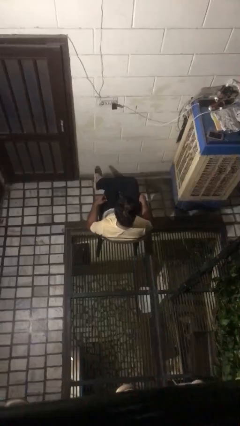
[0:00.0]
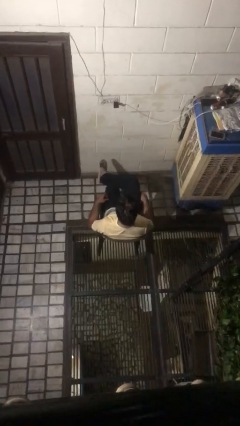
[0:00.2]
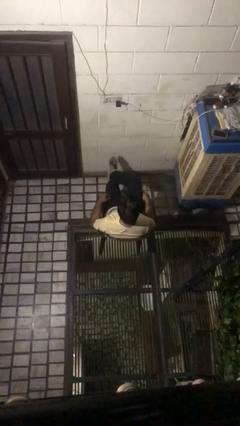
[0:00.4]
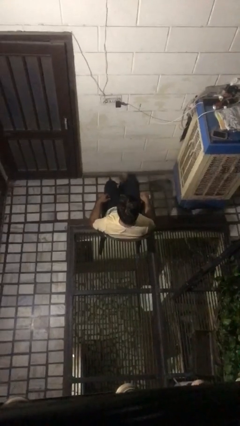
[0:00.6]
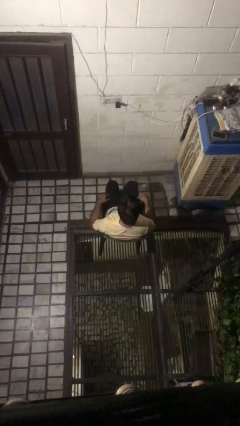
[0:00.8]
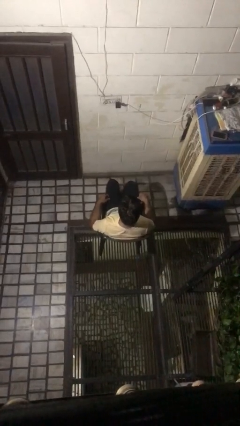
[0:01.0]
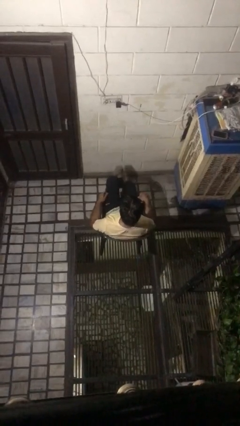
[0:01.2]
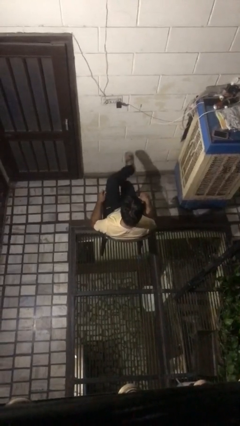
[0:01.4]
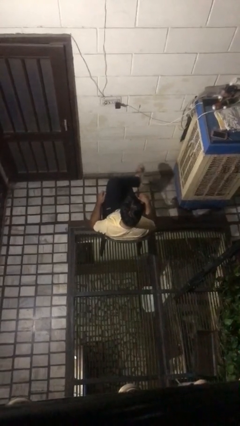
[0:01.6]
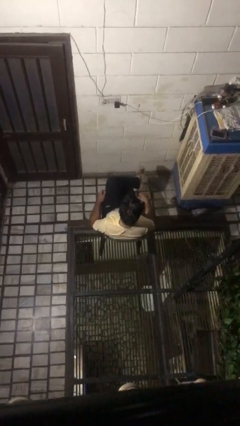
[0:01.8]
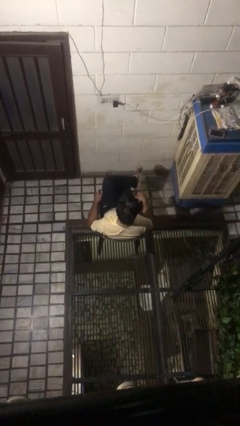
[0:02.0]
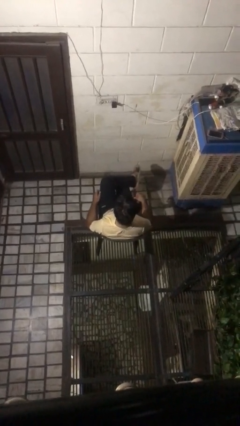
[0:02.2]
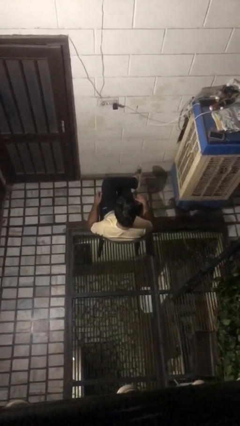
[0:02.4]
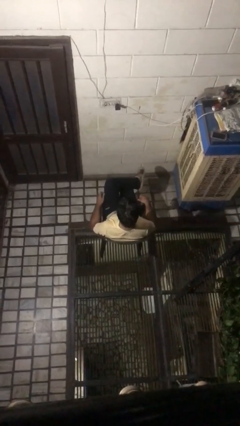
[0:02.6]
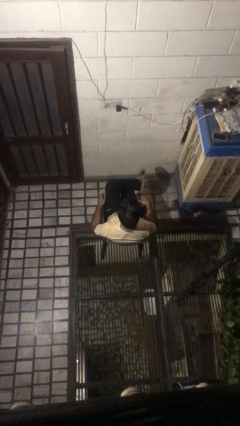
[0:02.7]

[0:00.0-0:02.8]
person crosses legs

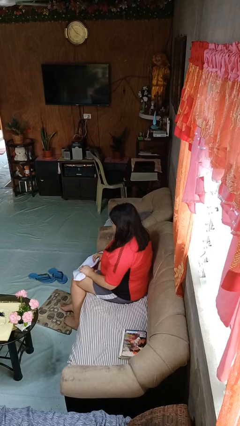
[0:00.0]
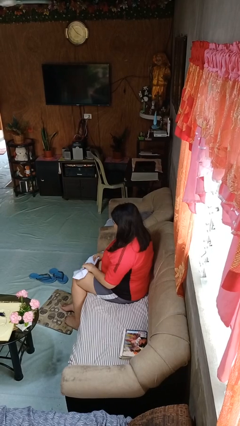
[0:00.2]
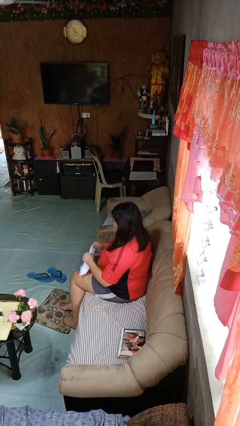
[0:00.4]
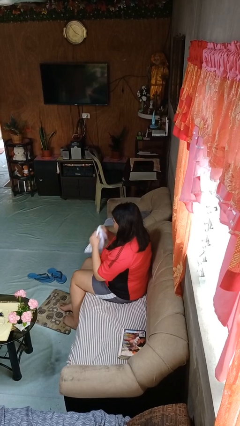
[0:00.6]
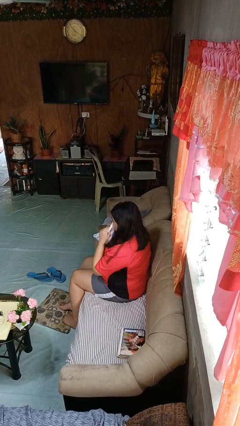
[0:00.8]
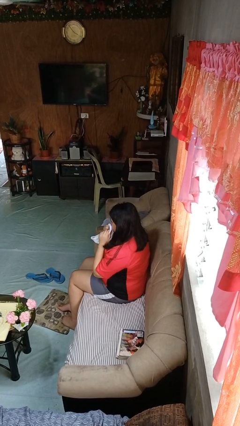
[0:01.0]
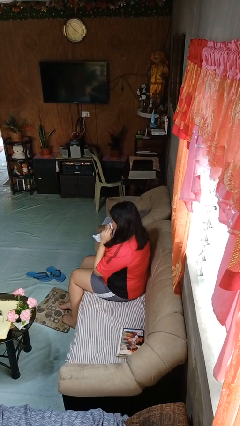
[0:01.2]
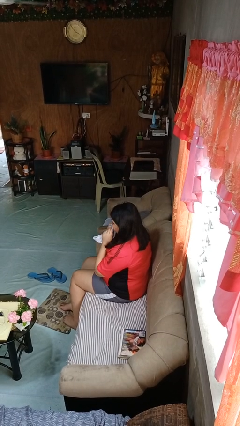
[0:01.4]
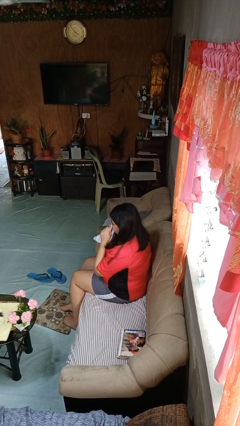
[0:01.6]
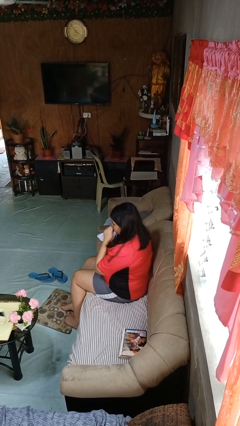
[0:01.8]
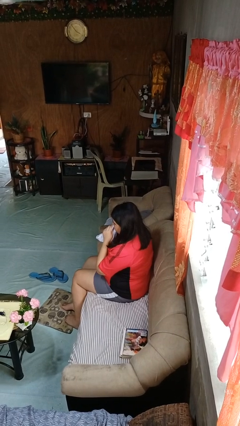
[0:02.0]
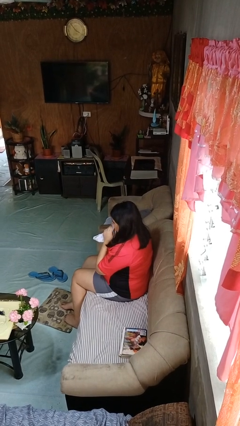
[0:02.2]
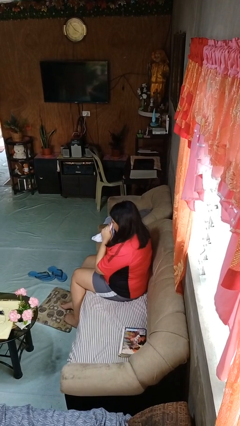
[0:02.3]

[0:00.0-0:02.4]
person wipes mouth with napkin

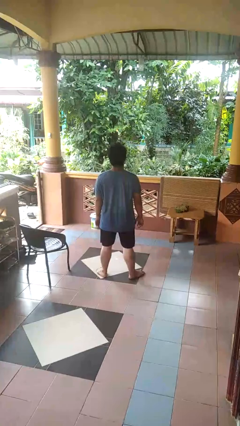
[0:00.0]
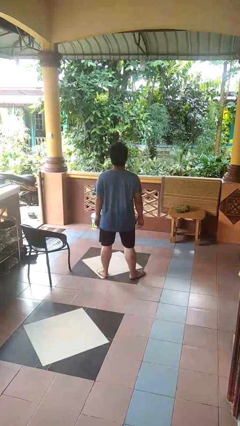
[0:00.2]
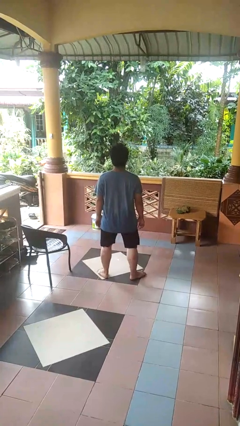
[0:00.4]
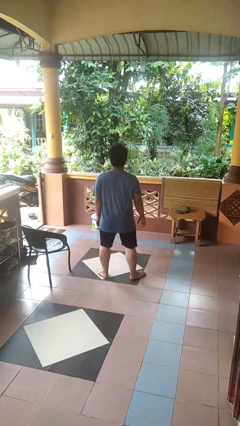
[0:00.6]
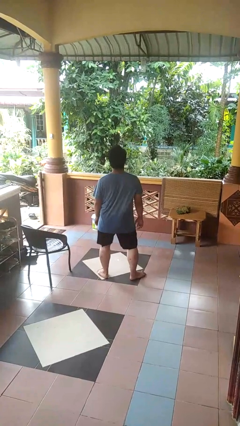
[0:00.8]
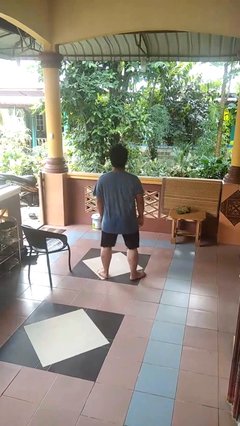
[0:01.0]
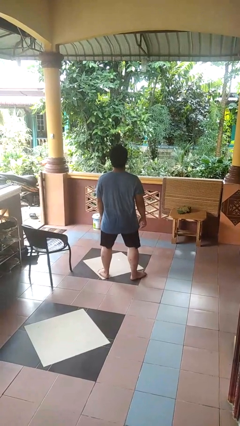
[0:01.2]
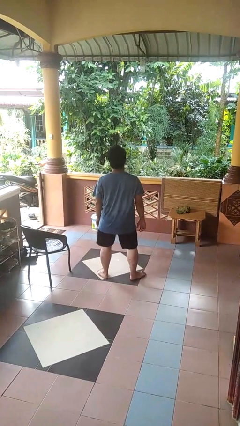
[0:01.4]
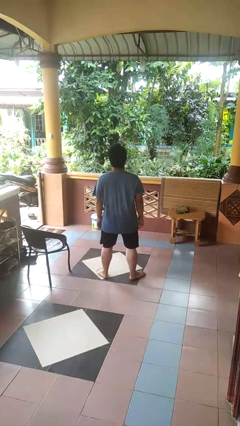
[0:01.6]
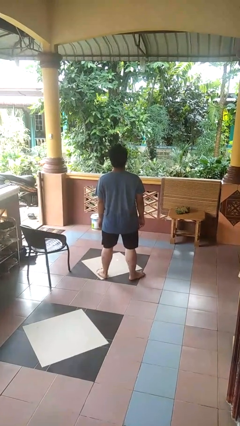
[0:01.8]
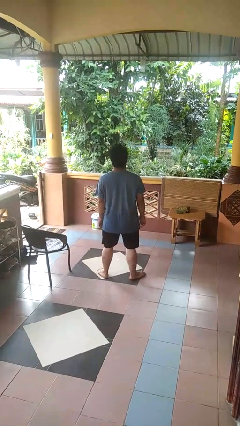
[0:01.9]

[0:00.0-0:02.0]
person wiggles hips

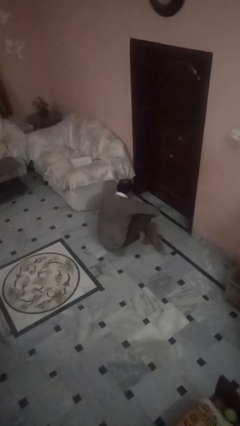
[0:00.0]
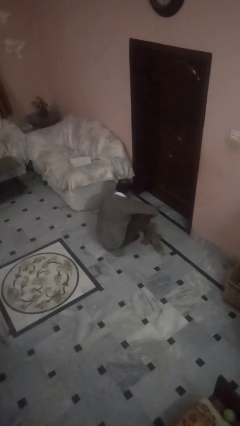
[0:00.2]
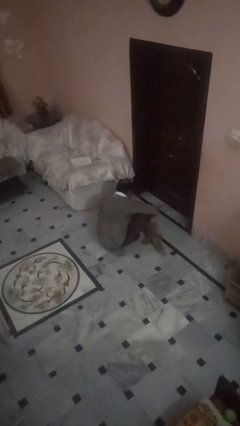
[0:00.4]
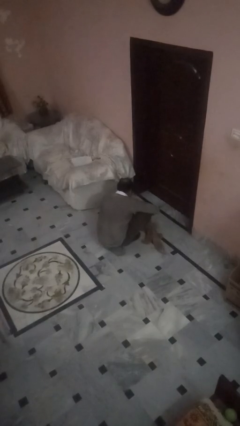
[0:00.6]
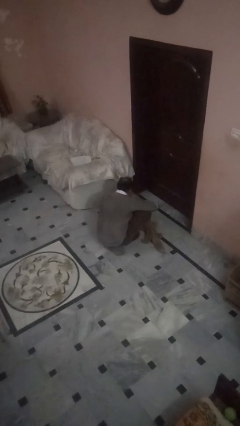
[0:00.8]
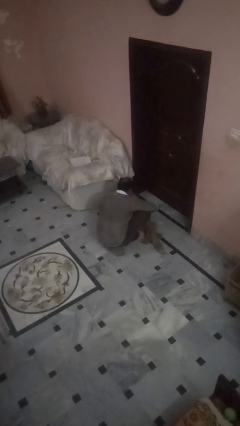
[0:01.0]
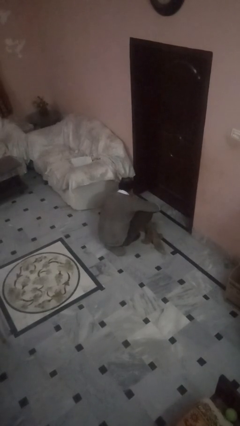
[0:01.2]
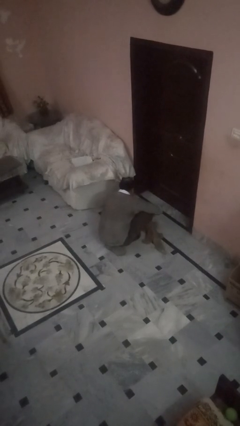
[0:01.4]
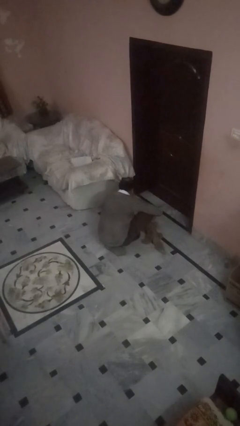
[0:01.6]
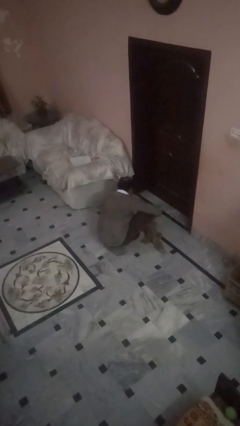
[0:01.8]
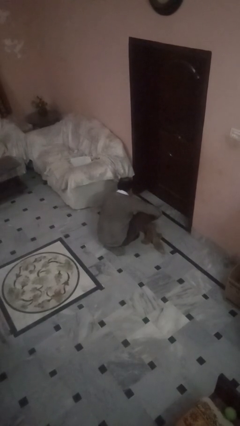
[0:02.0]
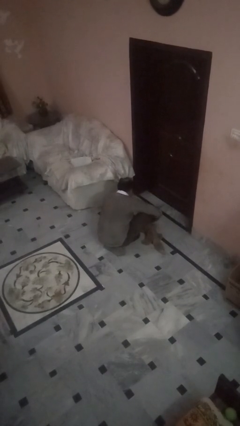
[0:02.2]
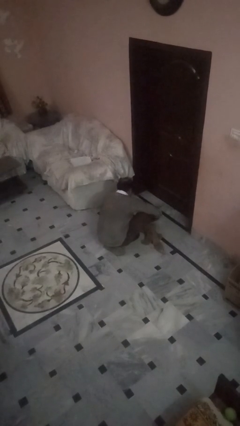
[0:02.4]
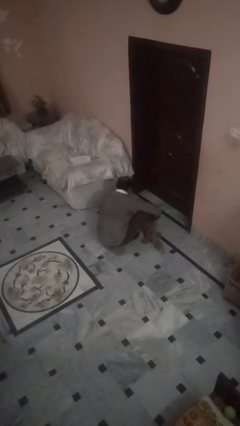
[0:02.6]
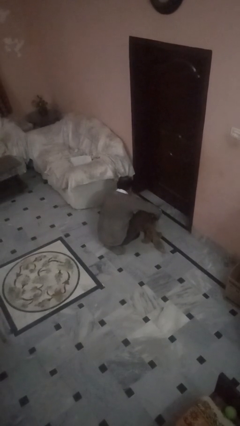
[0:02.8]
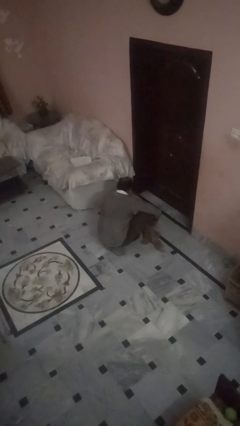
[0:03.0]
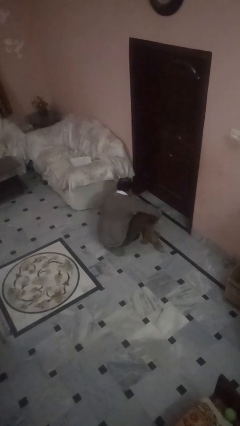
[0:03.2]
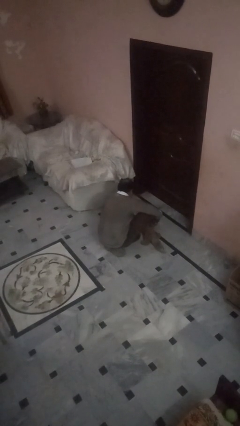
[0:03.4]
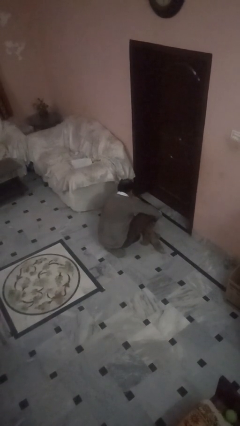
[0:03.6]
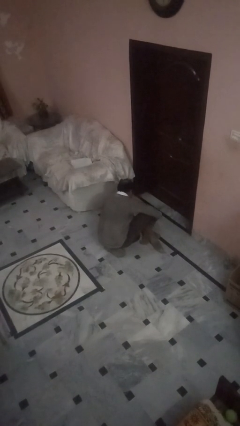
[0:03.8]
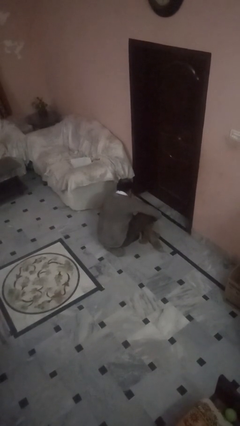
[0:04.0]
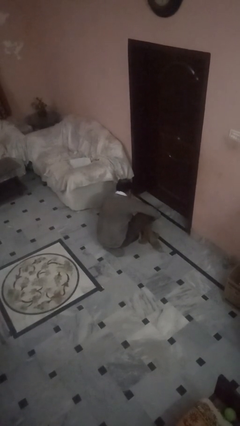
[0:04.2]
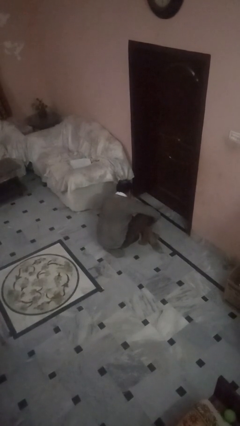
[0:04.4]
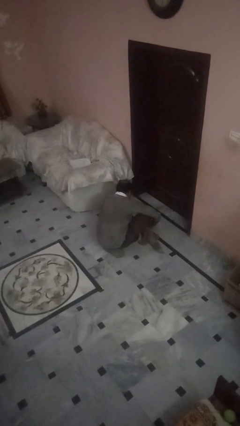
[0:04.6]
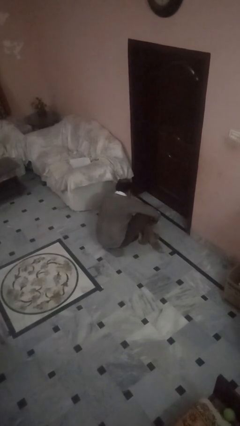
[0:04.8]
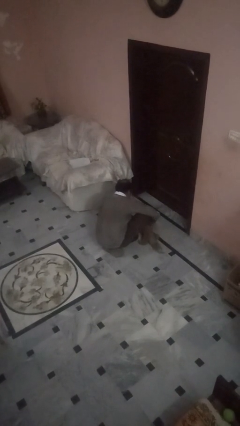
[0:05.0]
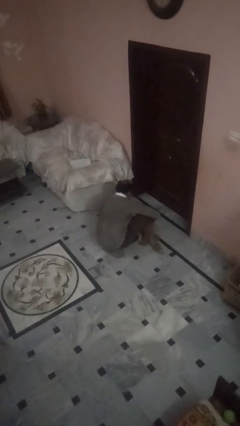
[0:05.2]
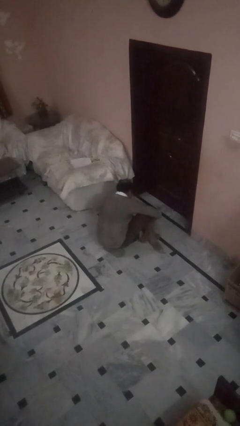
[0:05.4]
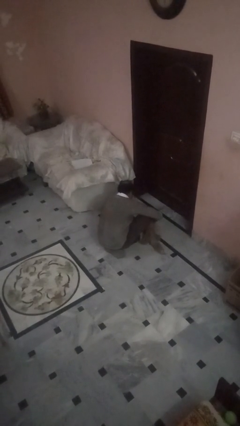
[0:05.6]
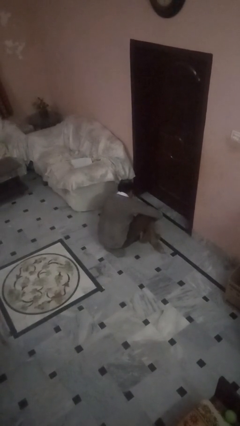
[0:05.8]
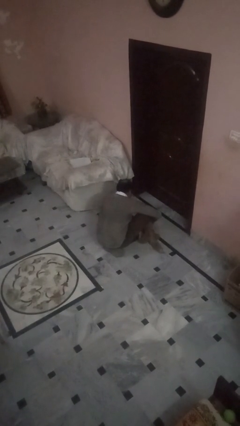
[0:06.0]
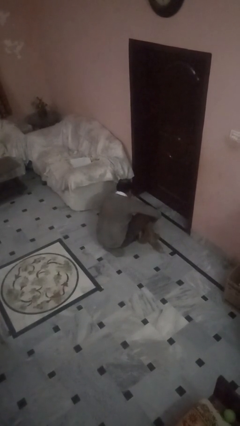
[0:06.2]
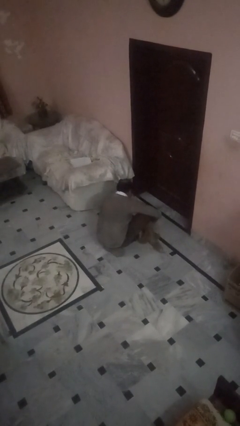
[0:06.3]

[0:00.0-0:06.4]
person attaches leash to dog

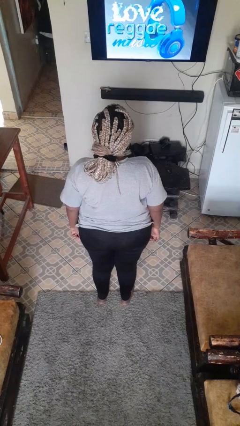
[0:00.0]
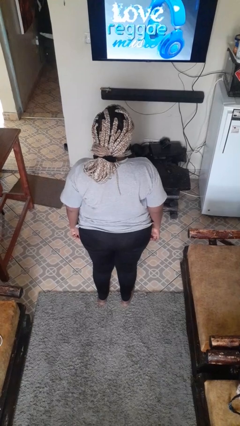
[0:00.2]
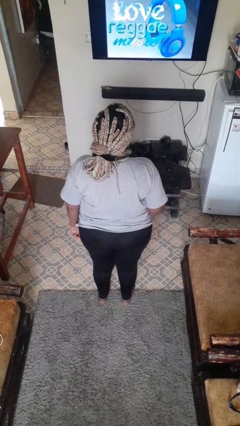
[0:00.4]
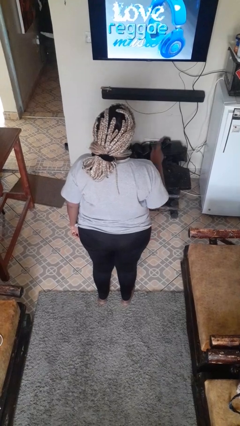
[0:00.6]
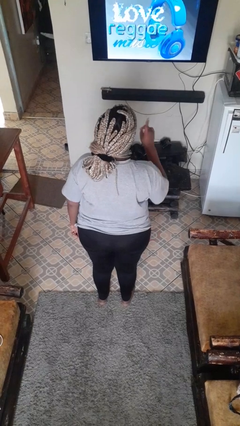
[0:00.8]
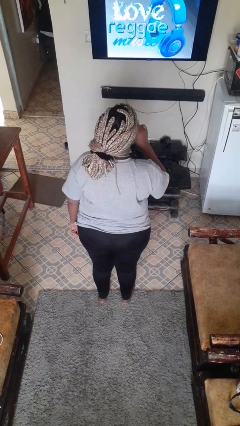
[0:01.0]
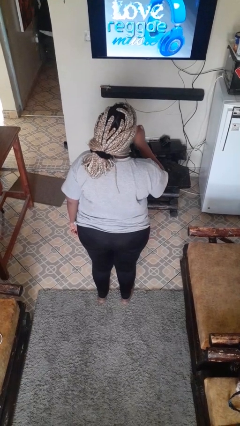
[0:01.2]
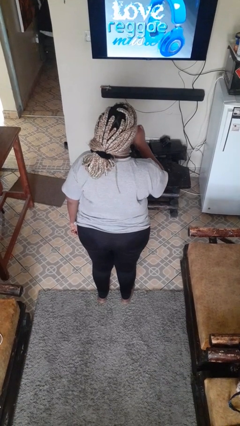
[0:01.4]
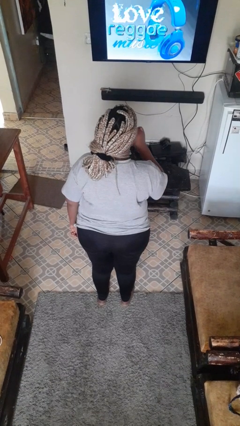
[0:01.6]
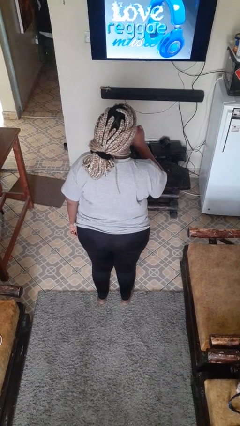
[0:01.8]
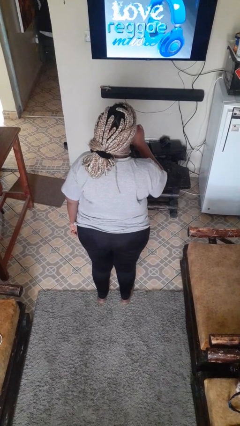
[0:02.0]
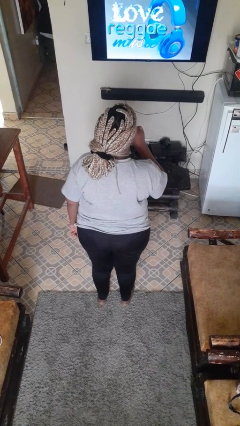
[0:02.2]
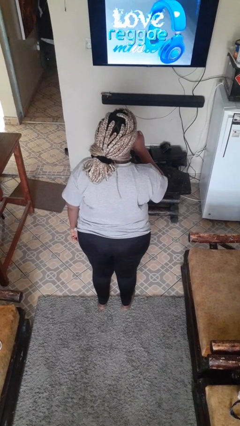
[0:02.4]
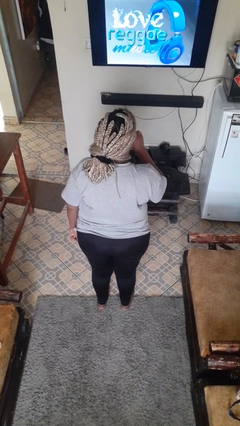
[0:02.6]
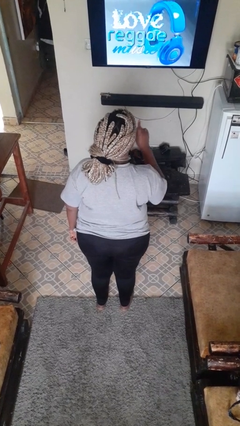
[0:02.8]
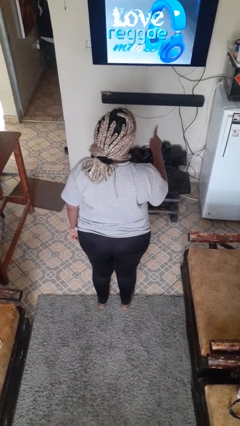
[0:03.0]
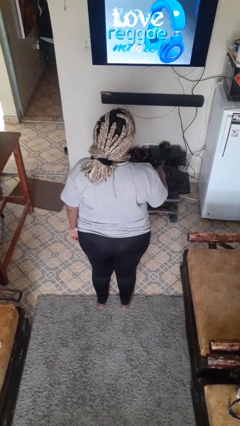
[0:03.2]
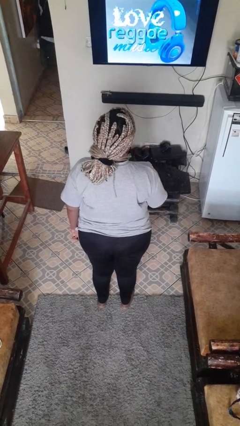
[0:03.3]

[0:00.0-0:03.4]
person gestures be quiet

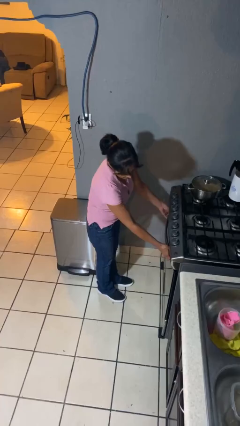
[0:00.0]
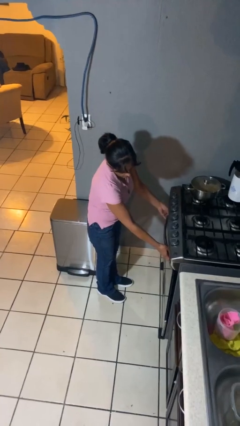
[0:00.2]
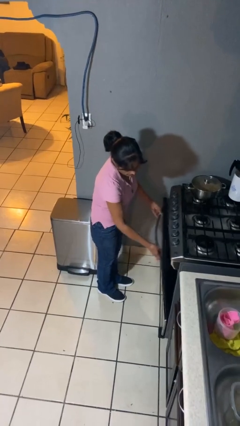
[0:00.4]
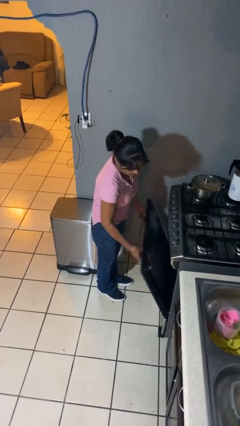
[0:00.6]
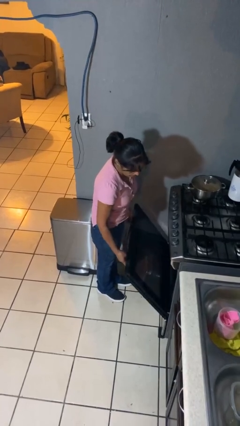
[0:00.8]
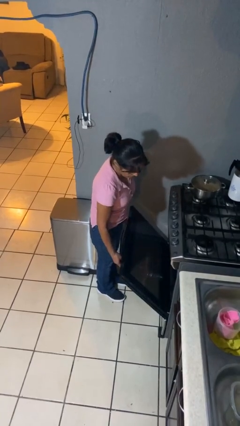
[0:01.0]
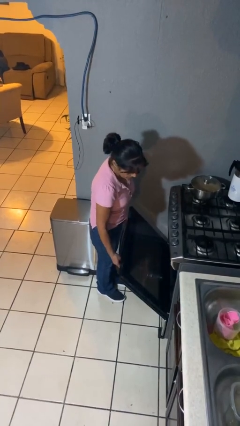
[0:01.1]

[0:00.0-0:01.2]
person opens oven door
